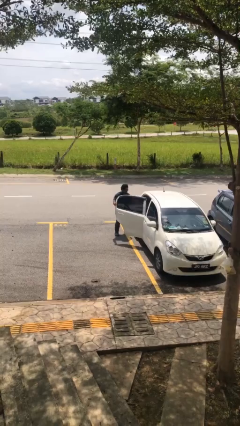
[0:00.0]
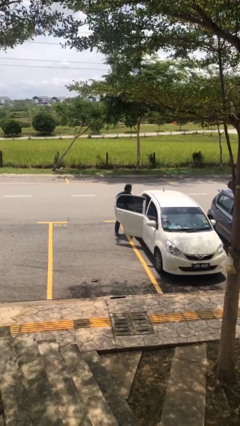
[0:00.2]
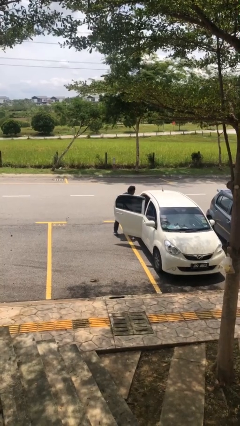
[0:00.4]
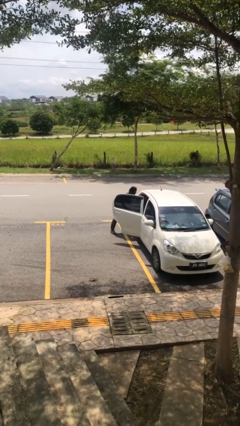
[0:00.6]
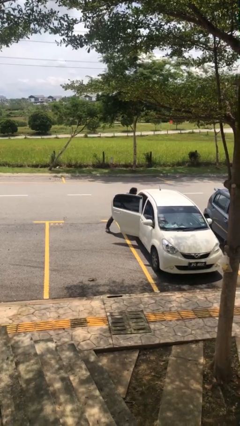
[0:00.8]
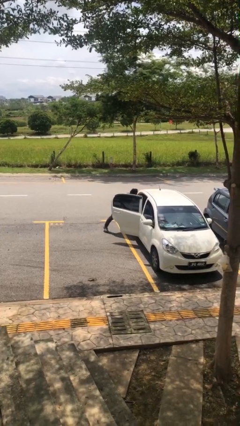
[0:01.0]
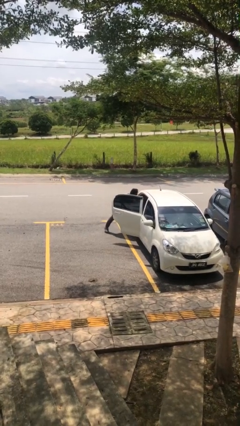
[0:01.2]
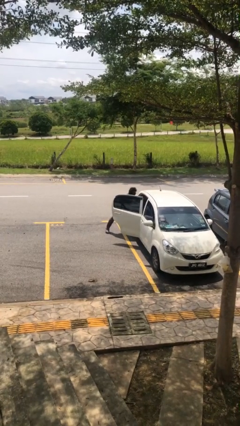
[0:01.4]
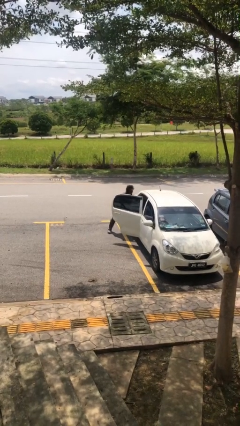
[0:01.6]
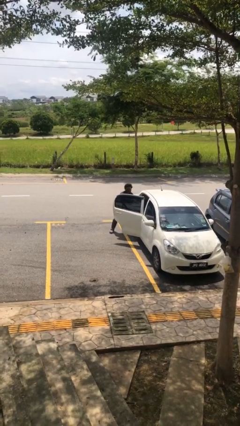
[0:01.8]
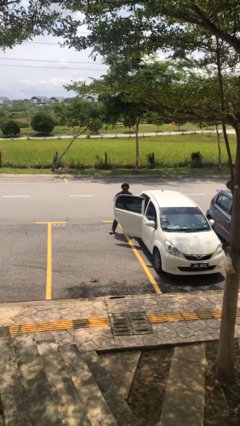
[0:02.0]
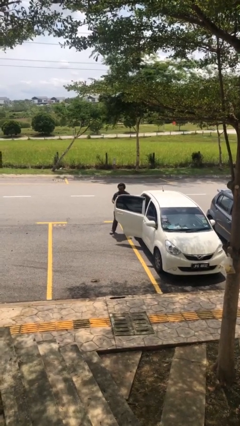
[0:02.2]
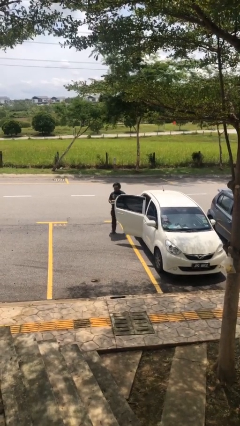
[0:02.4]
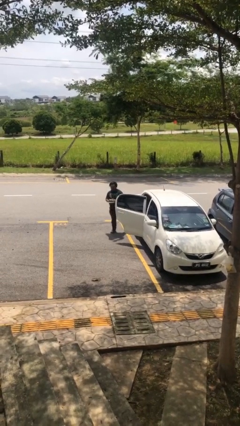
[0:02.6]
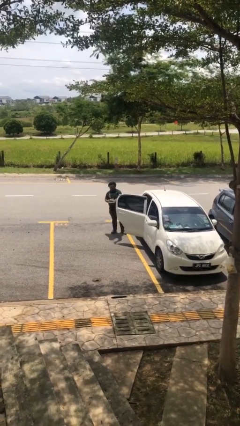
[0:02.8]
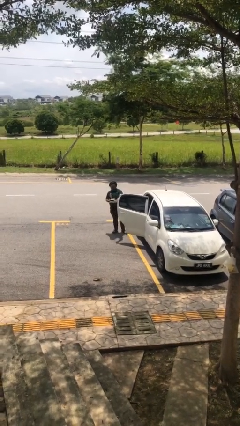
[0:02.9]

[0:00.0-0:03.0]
person unloads car

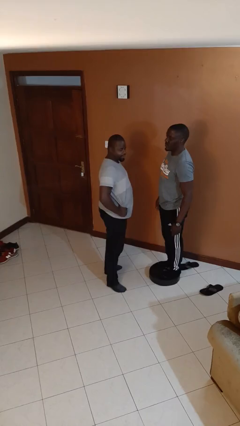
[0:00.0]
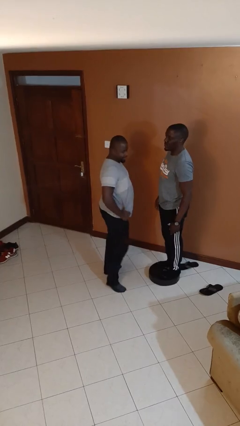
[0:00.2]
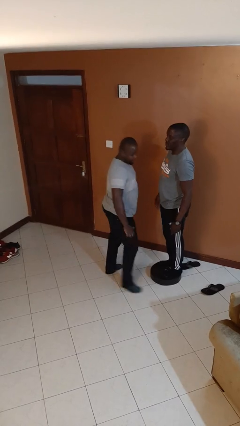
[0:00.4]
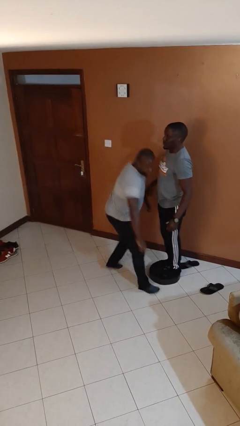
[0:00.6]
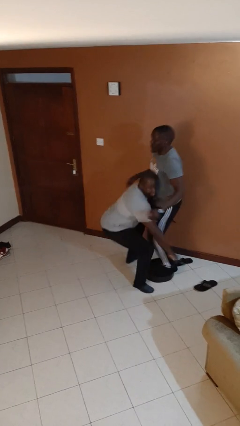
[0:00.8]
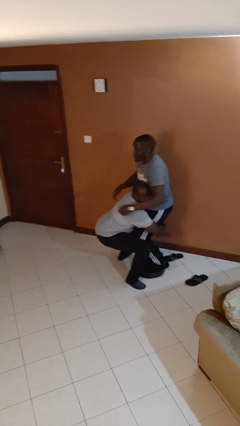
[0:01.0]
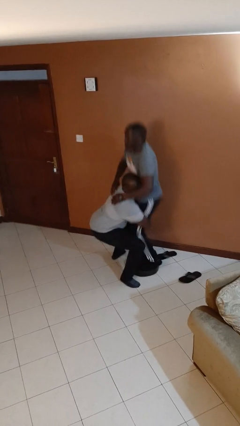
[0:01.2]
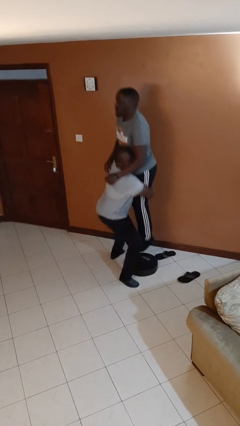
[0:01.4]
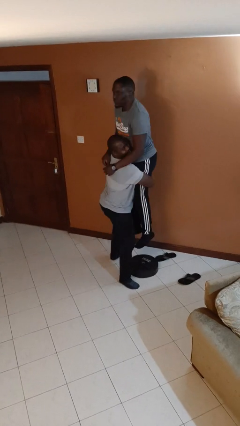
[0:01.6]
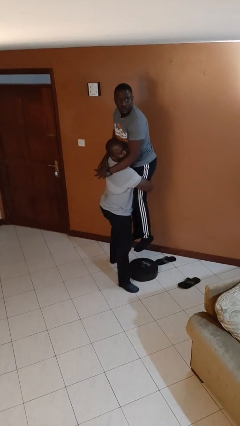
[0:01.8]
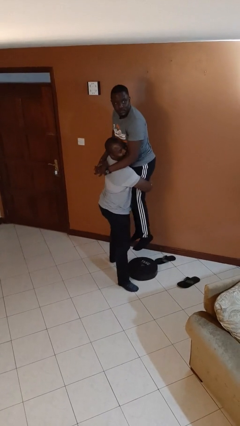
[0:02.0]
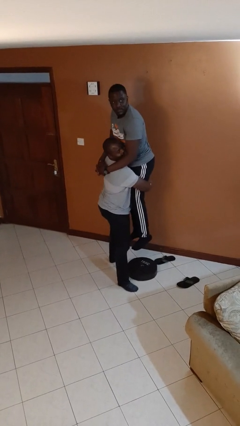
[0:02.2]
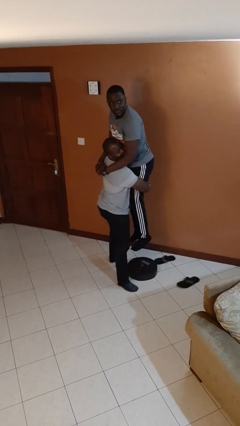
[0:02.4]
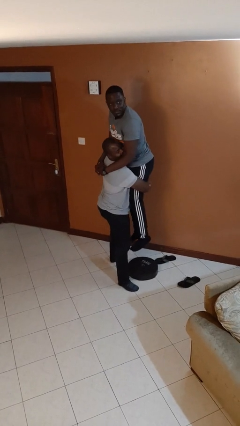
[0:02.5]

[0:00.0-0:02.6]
person picks up person

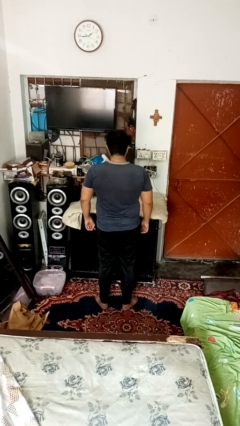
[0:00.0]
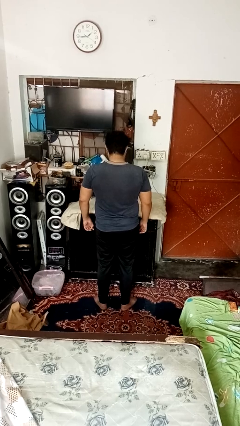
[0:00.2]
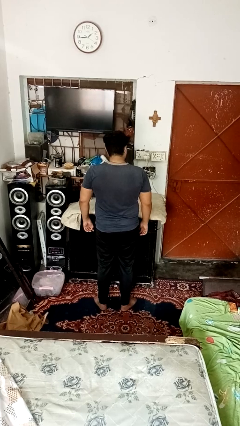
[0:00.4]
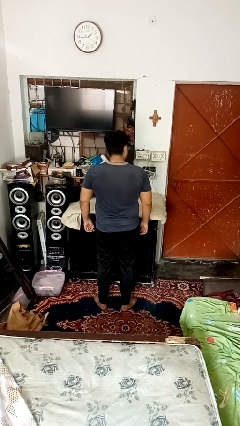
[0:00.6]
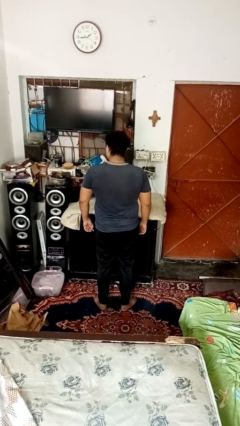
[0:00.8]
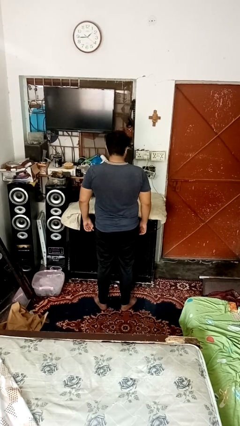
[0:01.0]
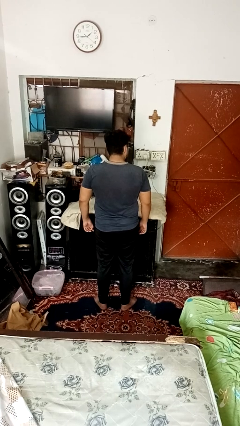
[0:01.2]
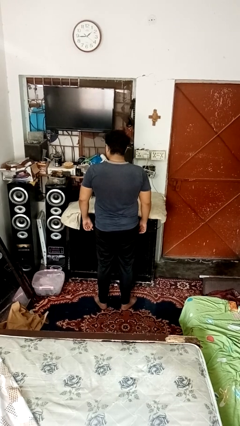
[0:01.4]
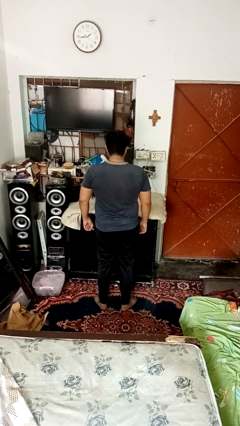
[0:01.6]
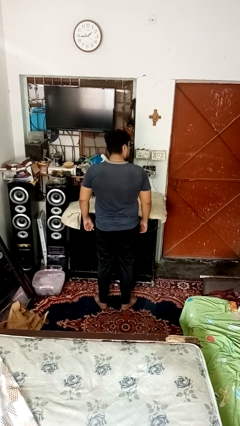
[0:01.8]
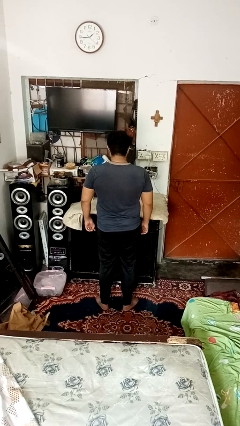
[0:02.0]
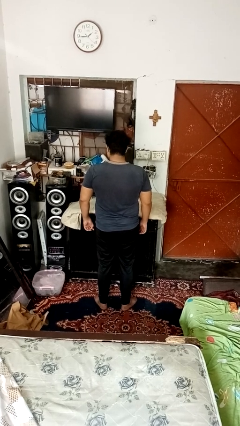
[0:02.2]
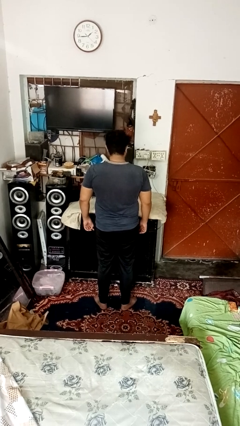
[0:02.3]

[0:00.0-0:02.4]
person shakes head

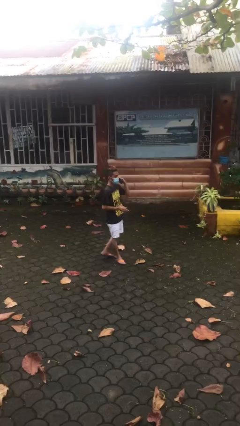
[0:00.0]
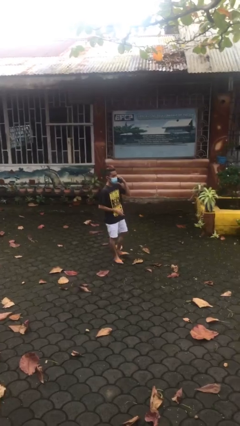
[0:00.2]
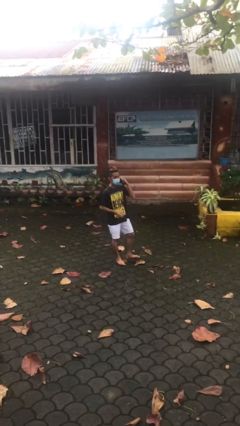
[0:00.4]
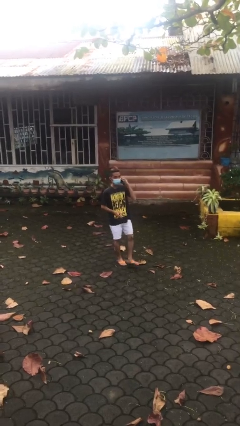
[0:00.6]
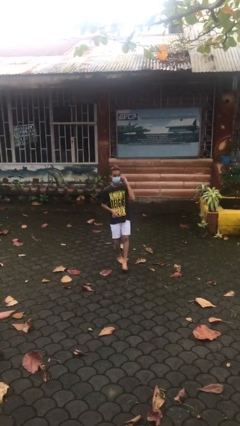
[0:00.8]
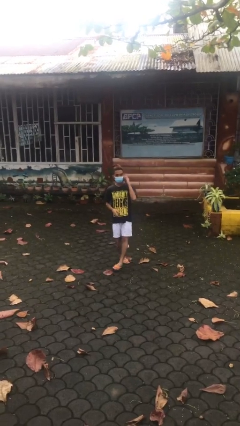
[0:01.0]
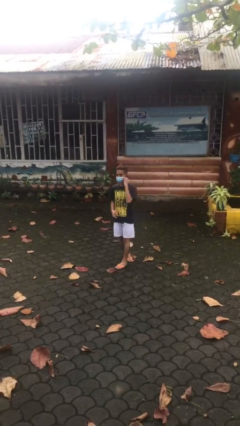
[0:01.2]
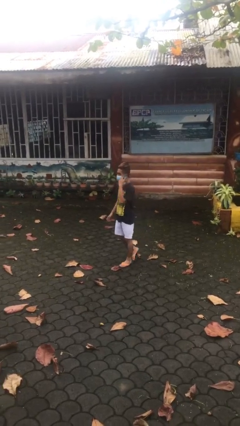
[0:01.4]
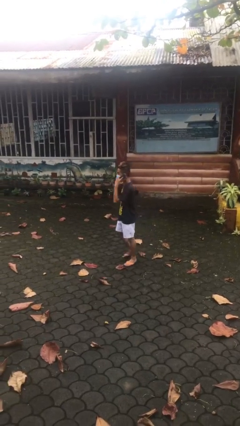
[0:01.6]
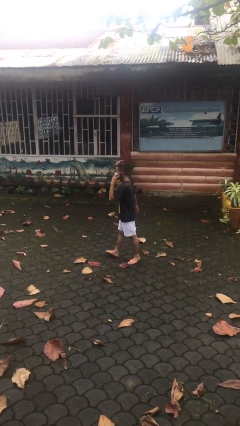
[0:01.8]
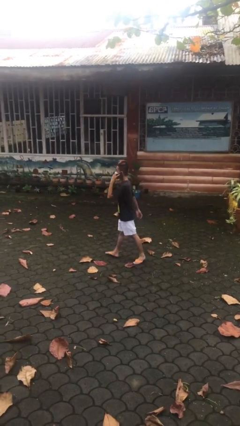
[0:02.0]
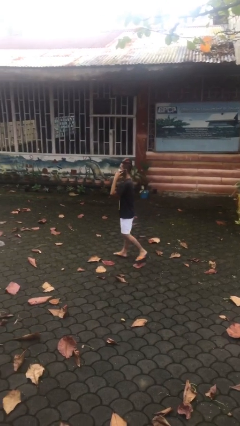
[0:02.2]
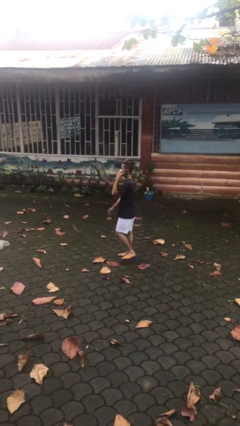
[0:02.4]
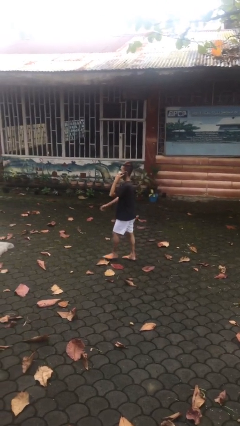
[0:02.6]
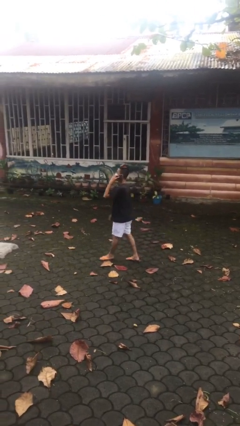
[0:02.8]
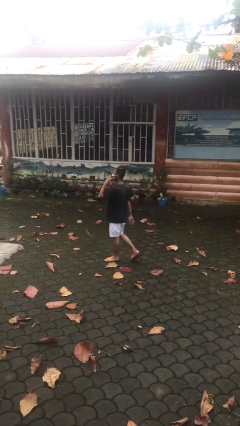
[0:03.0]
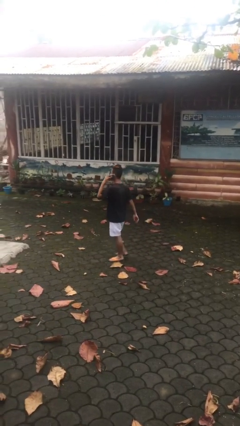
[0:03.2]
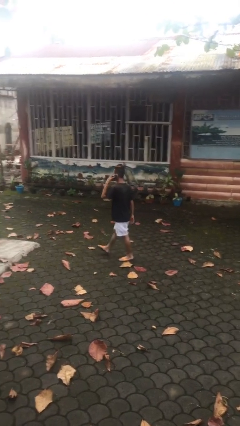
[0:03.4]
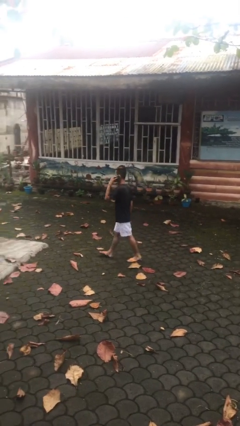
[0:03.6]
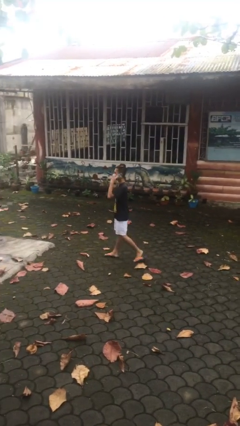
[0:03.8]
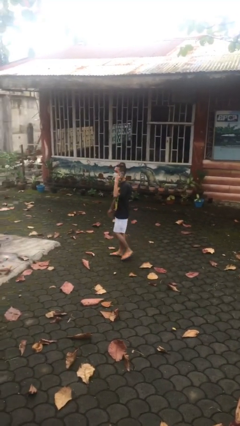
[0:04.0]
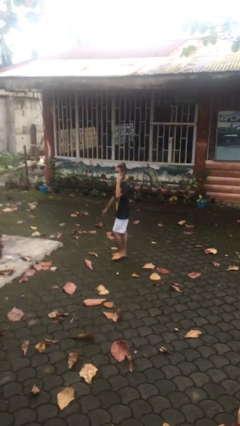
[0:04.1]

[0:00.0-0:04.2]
person talks on phone

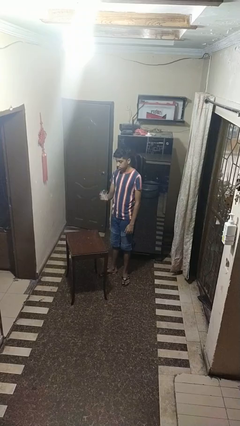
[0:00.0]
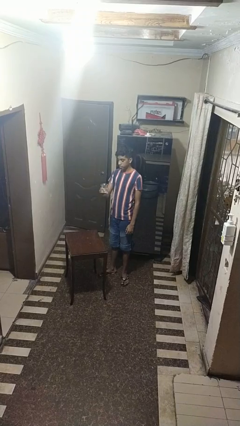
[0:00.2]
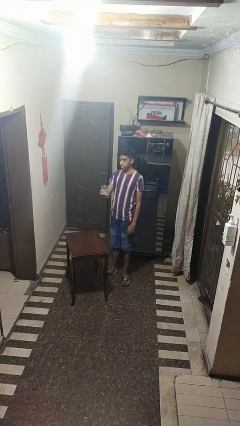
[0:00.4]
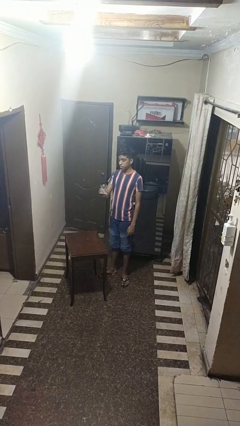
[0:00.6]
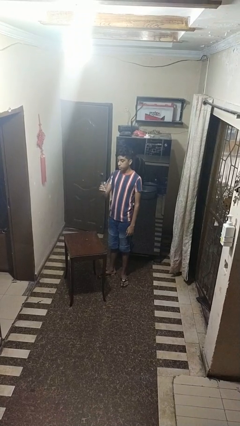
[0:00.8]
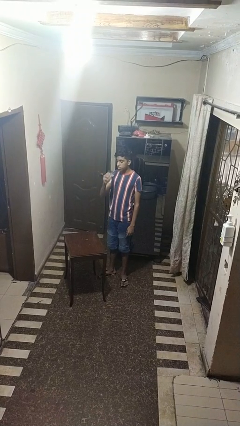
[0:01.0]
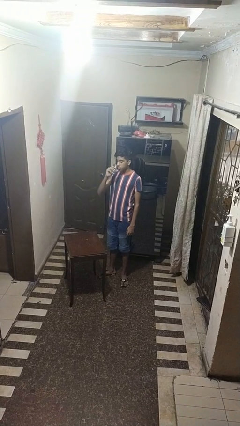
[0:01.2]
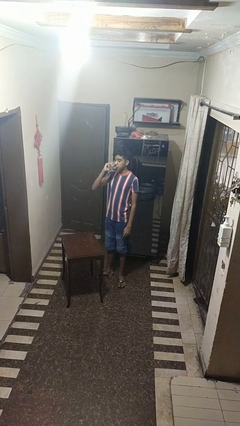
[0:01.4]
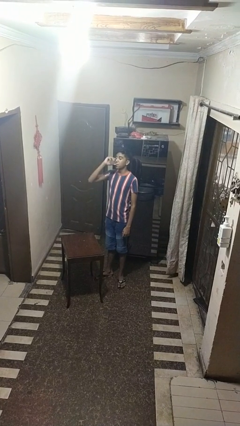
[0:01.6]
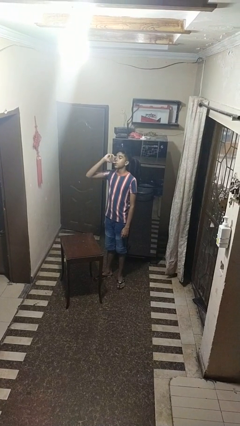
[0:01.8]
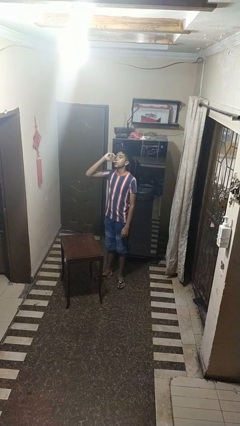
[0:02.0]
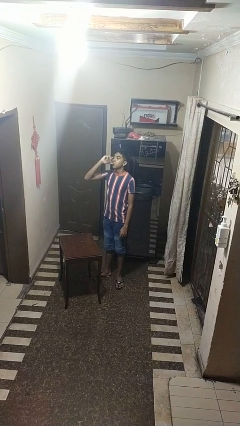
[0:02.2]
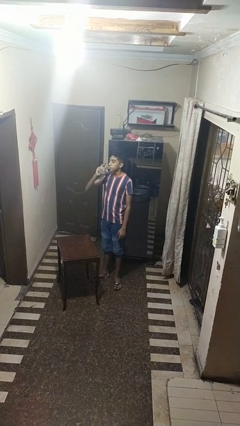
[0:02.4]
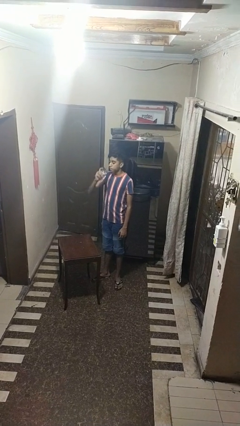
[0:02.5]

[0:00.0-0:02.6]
person drinks from shotglass

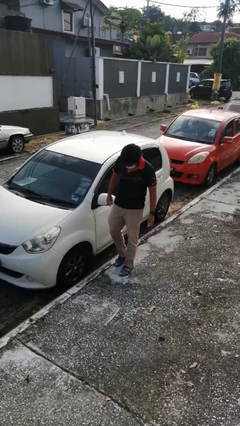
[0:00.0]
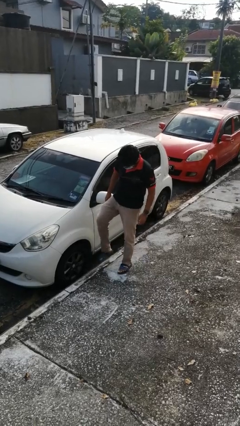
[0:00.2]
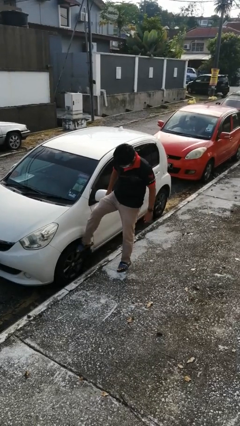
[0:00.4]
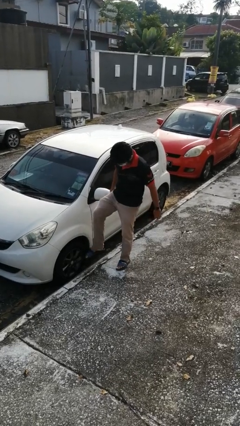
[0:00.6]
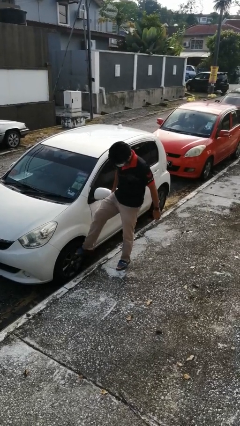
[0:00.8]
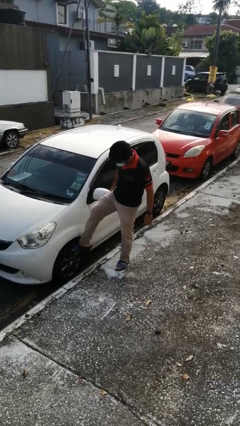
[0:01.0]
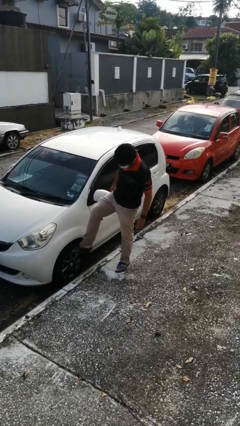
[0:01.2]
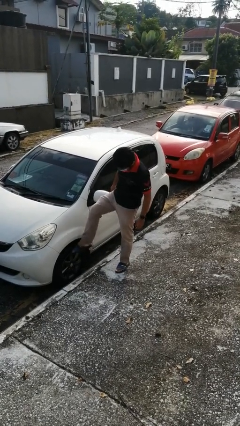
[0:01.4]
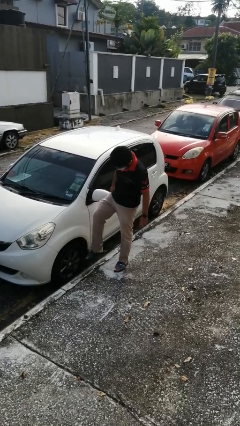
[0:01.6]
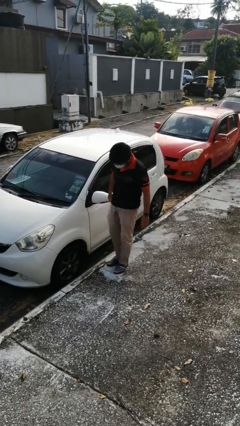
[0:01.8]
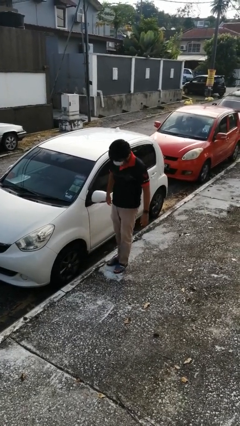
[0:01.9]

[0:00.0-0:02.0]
person kicks car tires
